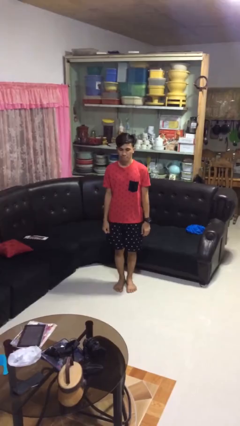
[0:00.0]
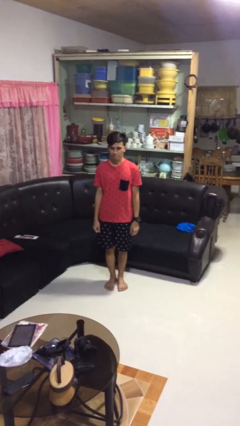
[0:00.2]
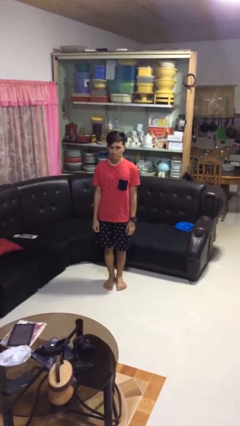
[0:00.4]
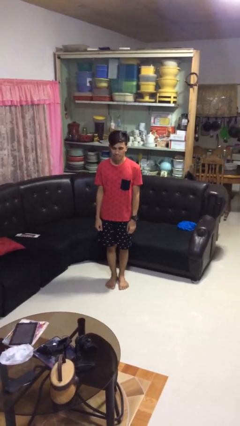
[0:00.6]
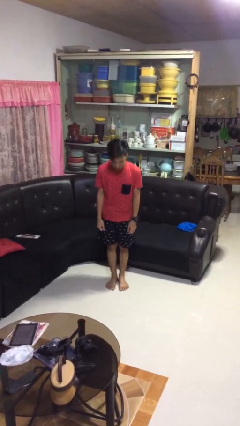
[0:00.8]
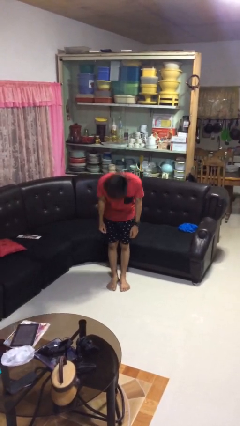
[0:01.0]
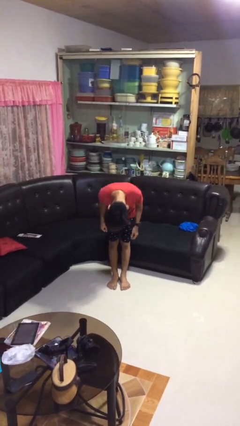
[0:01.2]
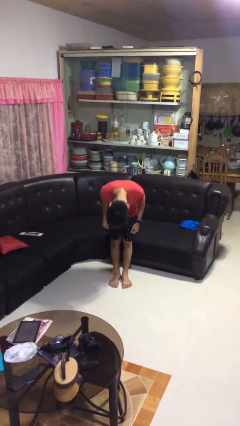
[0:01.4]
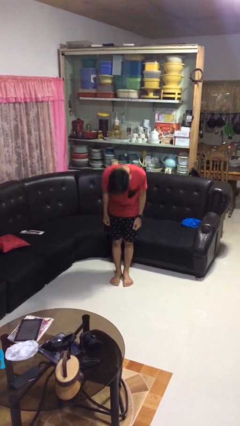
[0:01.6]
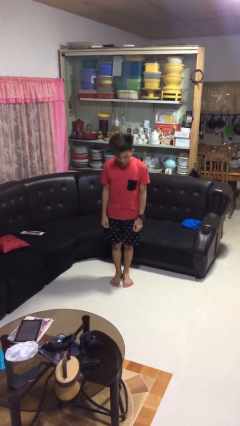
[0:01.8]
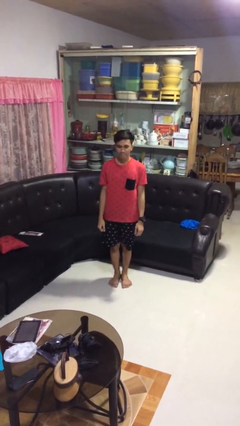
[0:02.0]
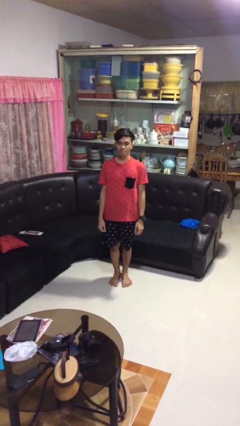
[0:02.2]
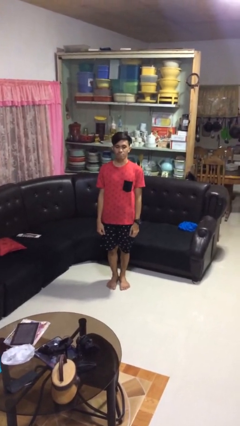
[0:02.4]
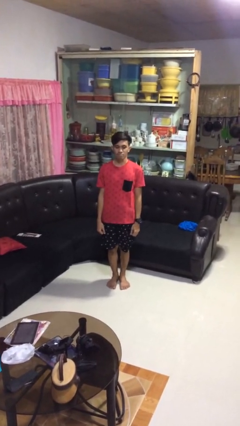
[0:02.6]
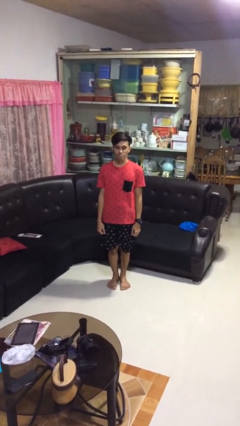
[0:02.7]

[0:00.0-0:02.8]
person bows

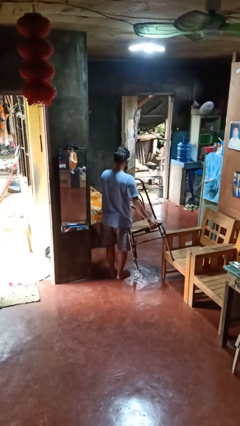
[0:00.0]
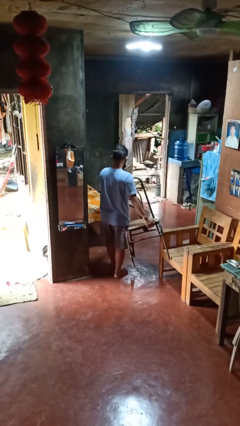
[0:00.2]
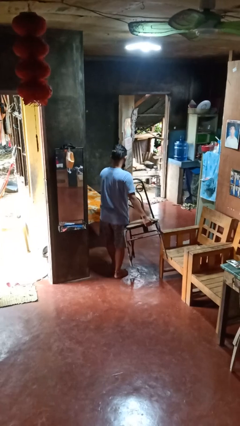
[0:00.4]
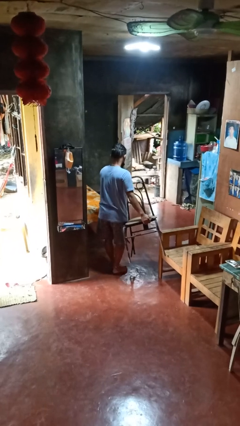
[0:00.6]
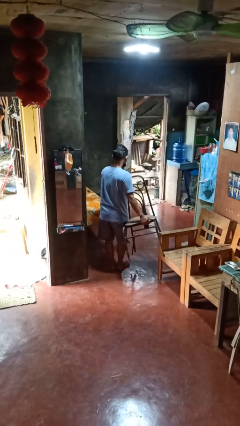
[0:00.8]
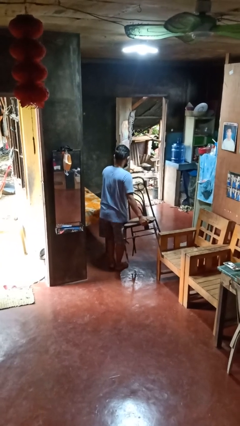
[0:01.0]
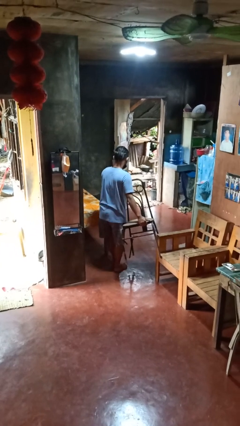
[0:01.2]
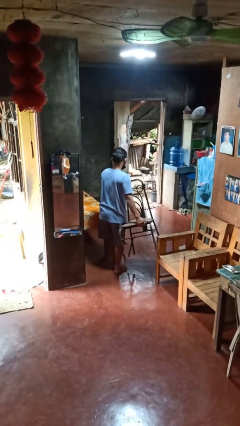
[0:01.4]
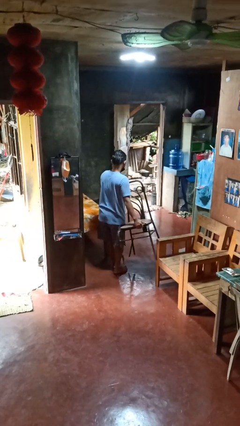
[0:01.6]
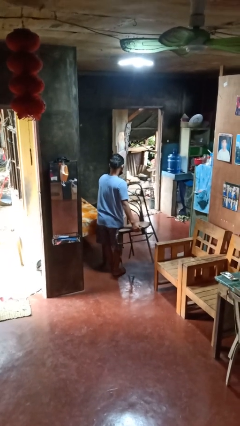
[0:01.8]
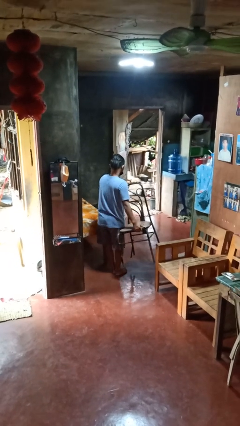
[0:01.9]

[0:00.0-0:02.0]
person carries furniture

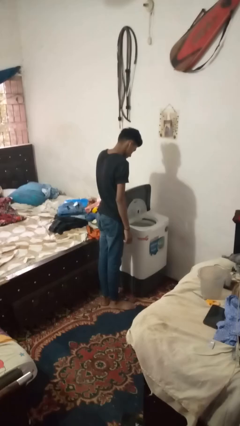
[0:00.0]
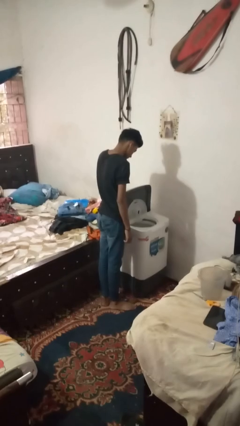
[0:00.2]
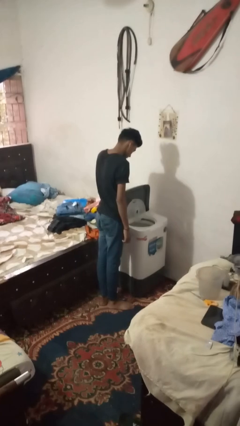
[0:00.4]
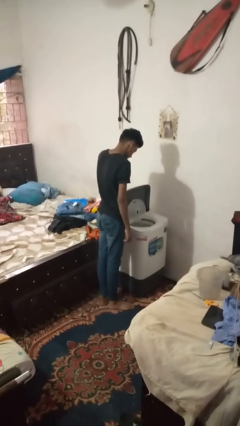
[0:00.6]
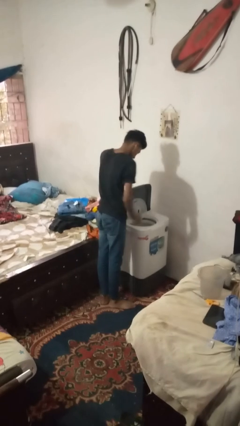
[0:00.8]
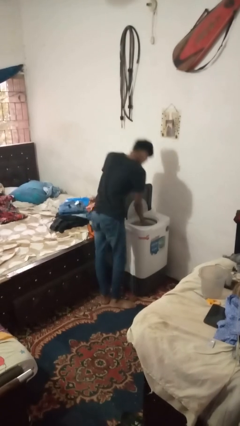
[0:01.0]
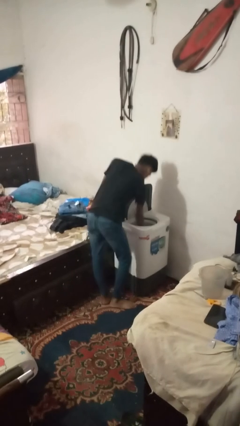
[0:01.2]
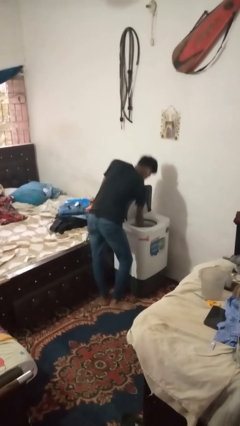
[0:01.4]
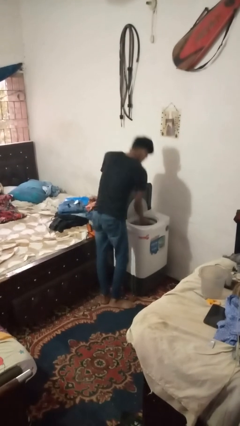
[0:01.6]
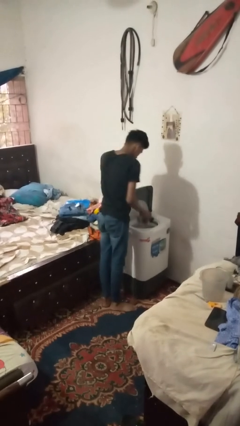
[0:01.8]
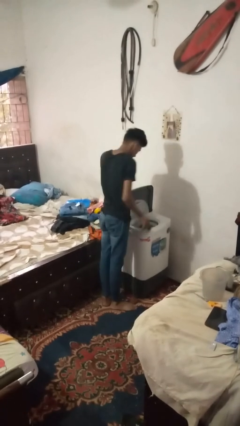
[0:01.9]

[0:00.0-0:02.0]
person unloads dryer

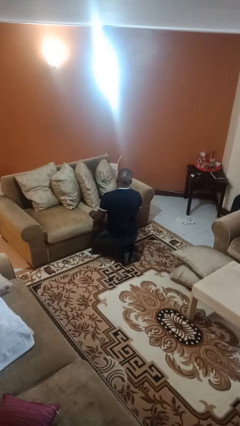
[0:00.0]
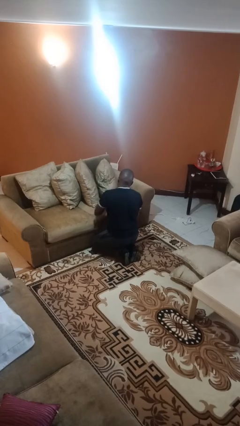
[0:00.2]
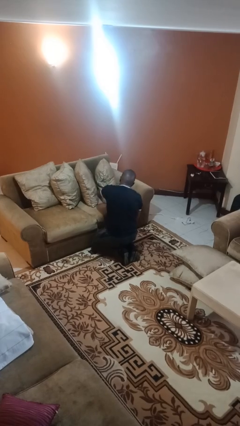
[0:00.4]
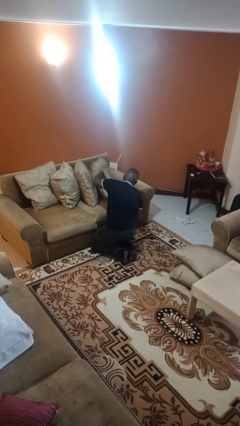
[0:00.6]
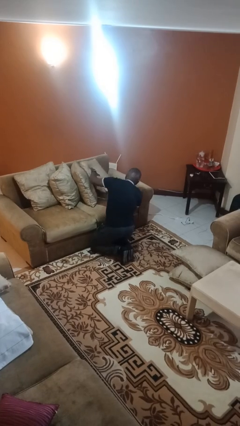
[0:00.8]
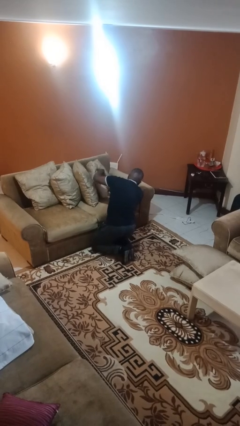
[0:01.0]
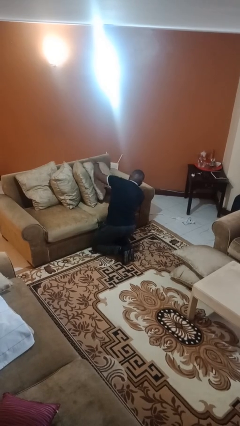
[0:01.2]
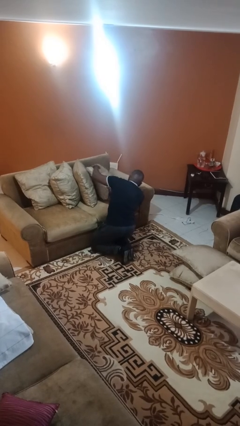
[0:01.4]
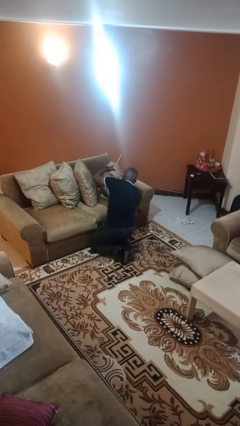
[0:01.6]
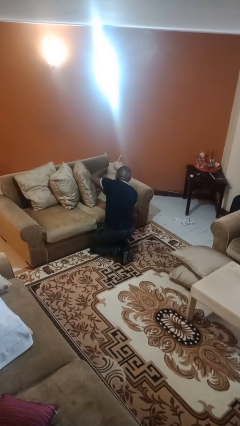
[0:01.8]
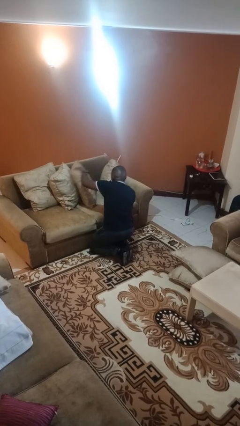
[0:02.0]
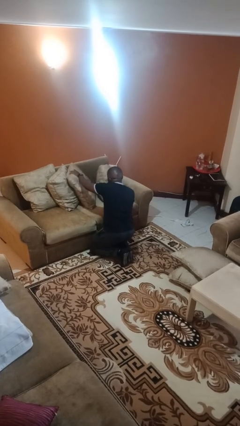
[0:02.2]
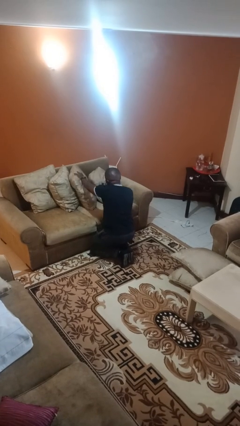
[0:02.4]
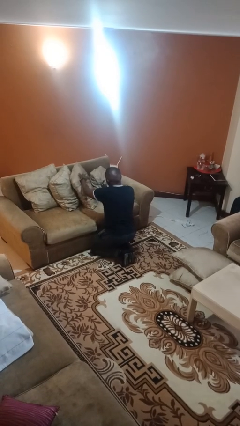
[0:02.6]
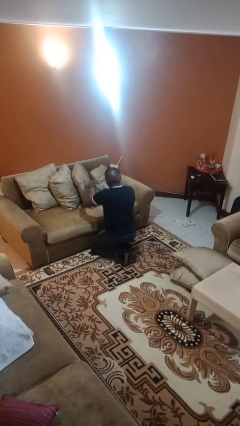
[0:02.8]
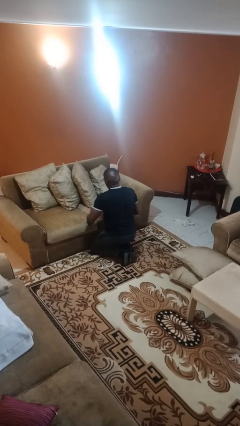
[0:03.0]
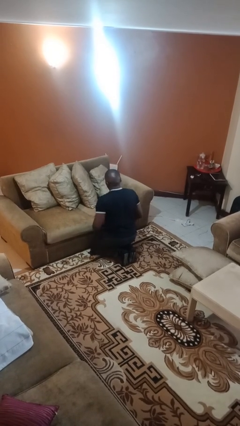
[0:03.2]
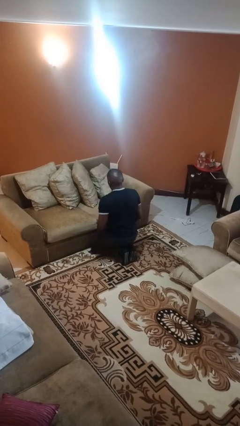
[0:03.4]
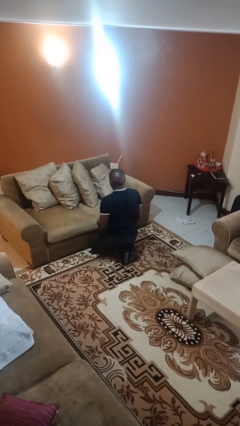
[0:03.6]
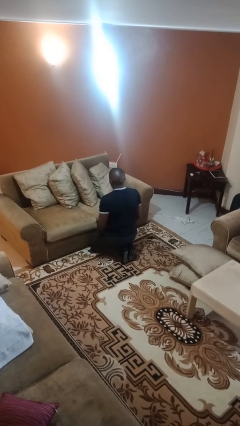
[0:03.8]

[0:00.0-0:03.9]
person searches in couch

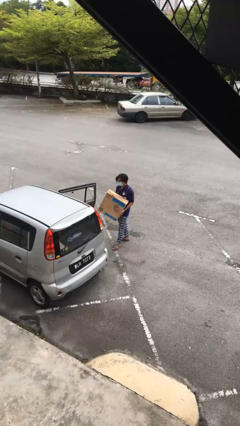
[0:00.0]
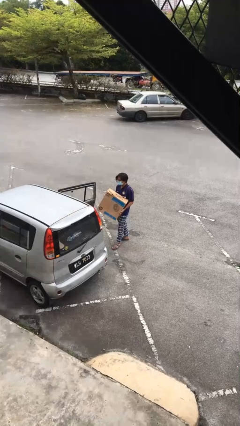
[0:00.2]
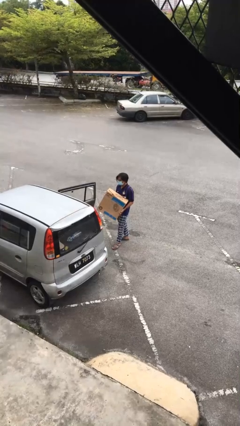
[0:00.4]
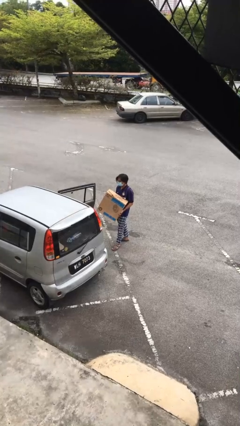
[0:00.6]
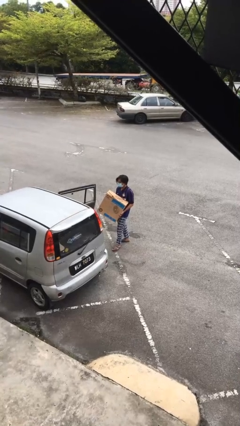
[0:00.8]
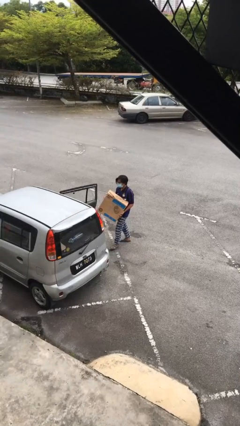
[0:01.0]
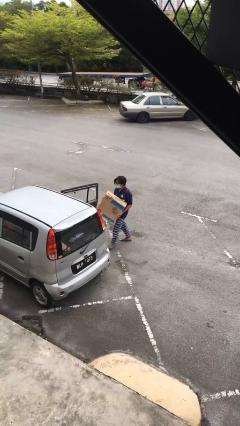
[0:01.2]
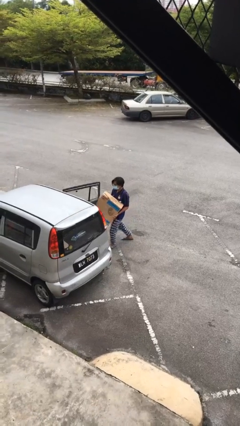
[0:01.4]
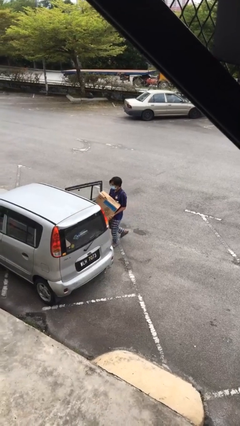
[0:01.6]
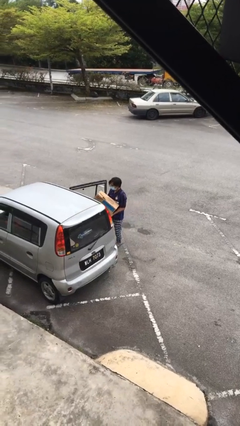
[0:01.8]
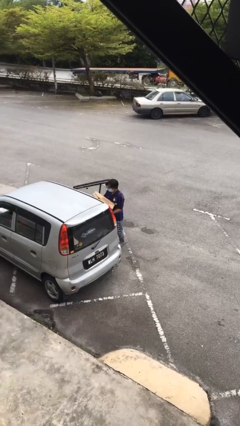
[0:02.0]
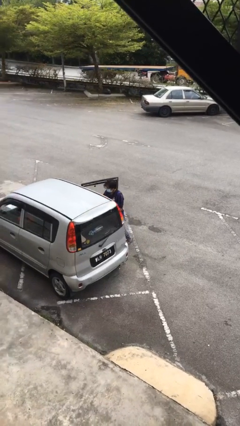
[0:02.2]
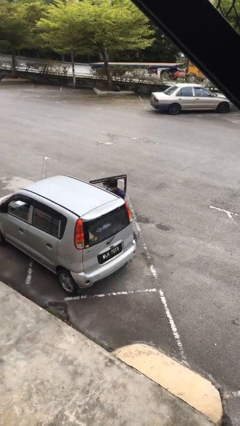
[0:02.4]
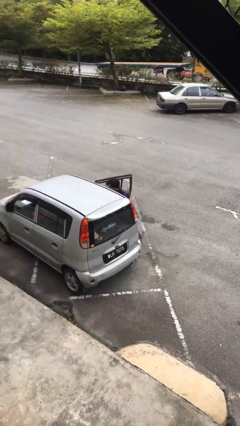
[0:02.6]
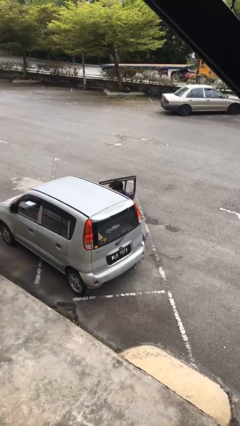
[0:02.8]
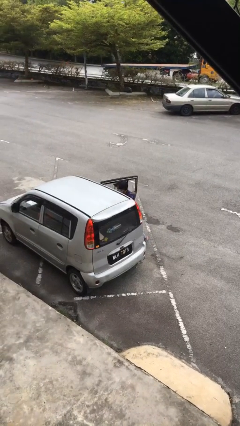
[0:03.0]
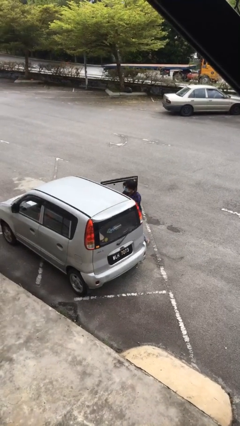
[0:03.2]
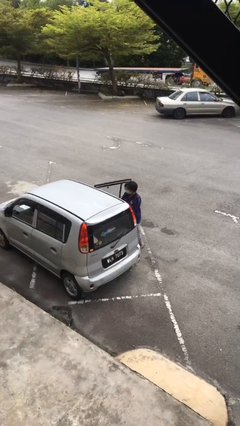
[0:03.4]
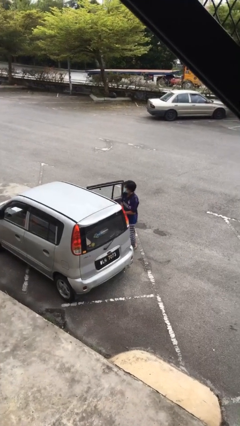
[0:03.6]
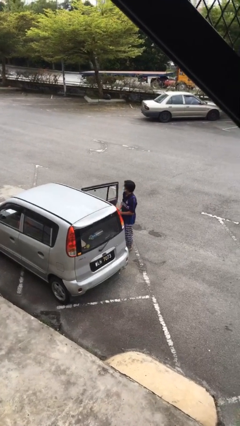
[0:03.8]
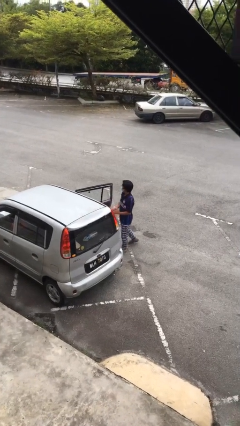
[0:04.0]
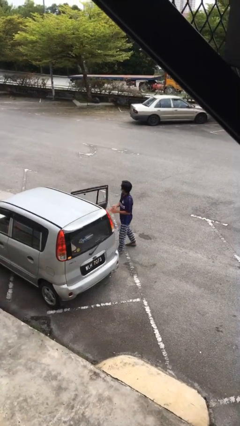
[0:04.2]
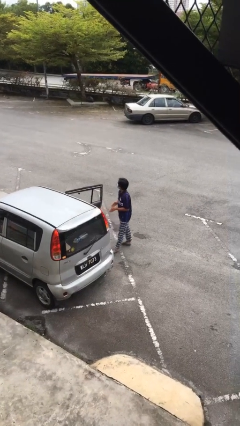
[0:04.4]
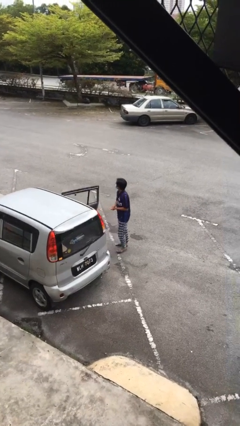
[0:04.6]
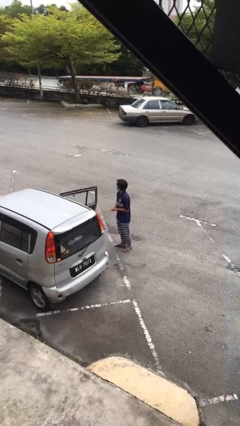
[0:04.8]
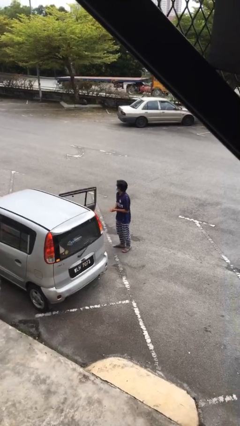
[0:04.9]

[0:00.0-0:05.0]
person loads car

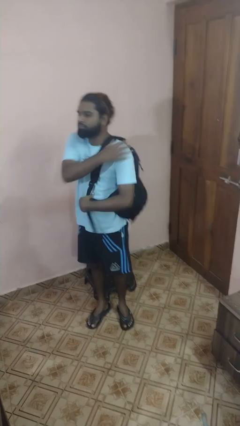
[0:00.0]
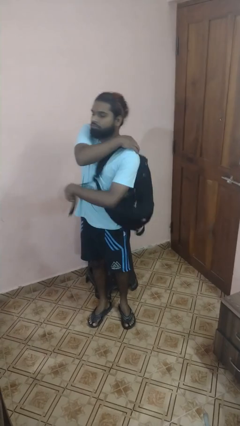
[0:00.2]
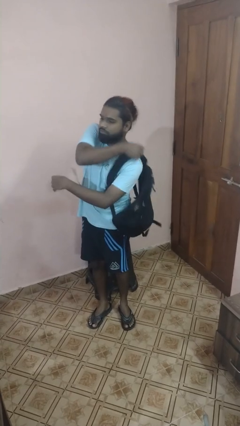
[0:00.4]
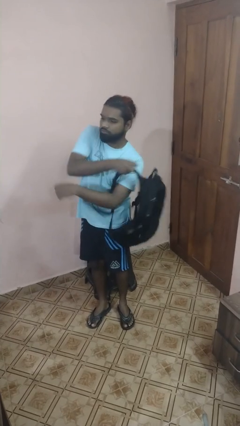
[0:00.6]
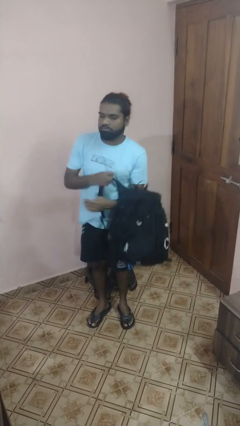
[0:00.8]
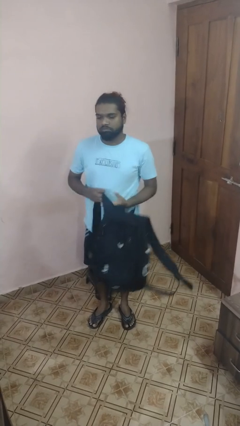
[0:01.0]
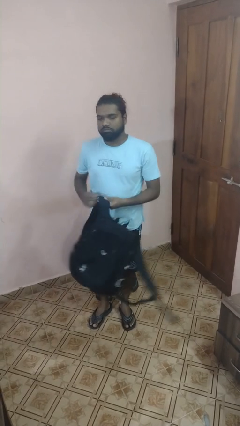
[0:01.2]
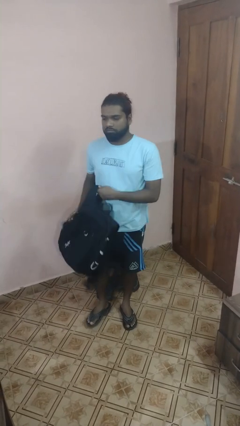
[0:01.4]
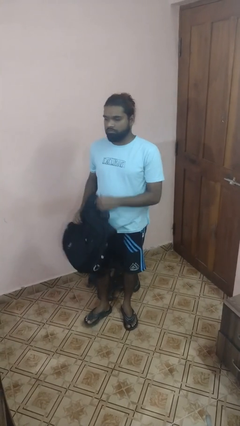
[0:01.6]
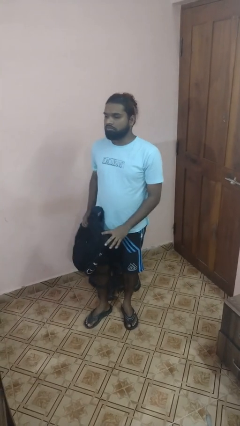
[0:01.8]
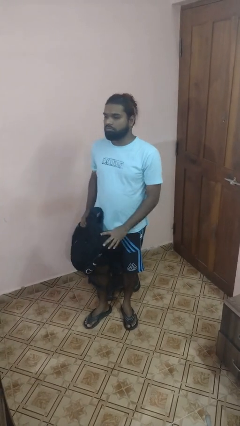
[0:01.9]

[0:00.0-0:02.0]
person takes off backpack
